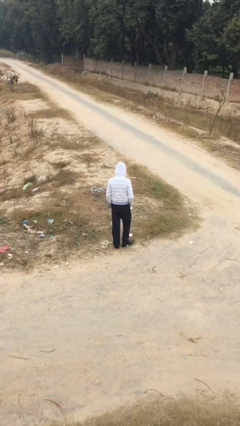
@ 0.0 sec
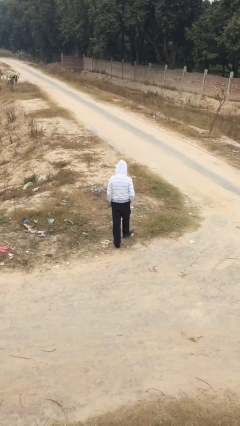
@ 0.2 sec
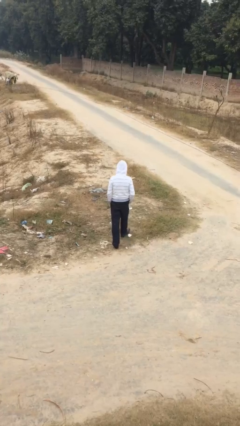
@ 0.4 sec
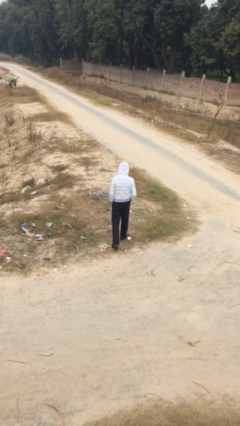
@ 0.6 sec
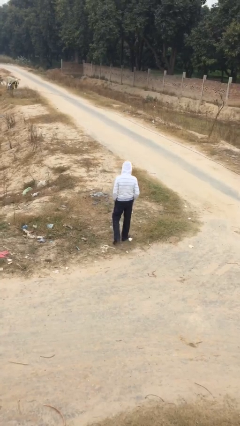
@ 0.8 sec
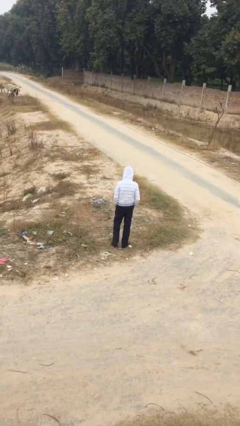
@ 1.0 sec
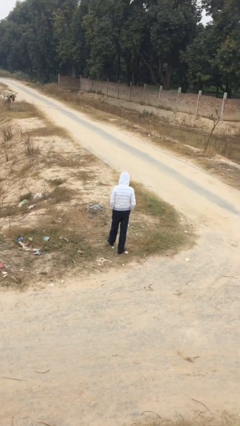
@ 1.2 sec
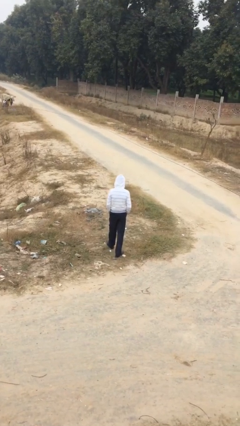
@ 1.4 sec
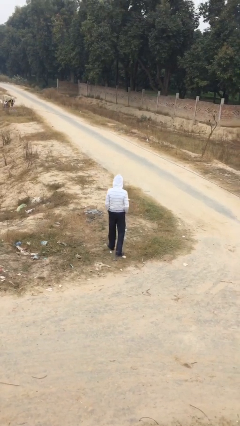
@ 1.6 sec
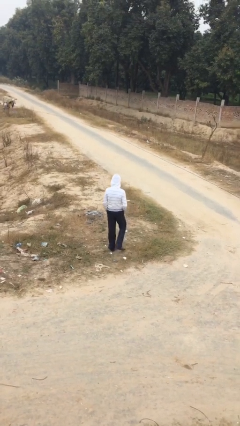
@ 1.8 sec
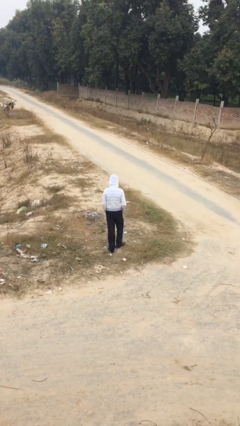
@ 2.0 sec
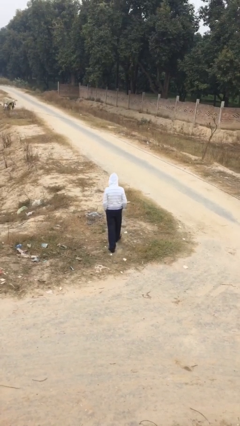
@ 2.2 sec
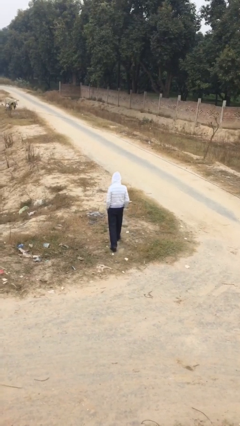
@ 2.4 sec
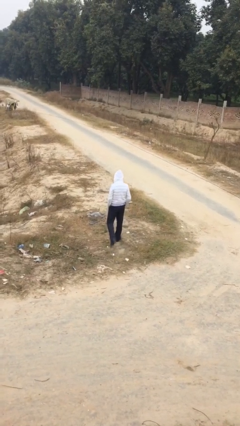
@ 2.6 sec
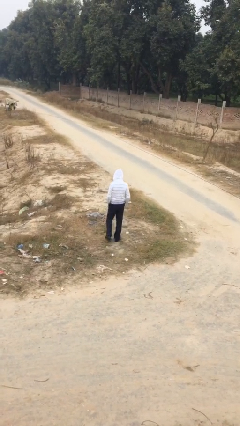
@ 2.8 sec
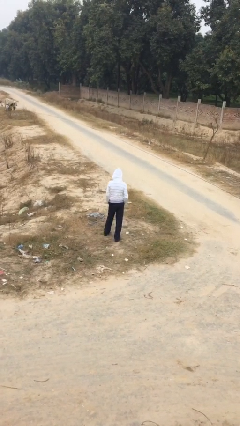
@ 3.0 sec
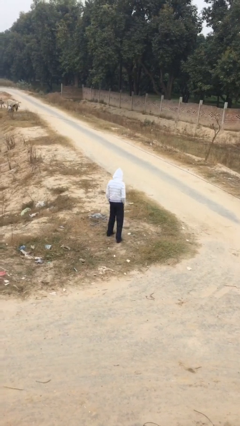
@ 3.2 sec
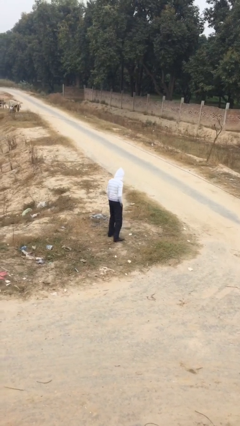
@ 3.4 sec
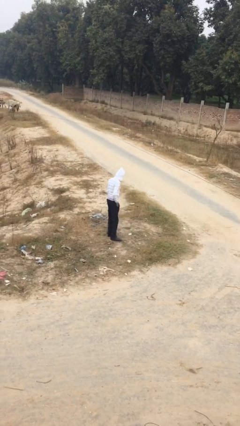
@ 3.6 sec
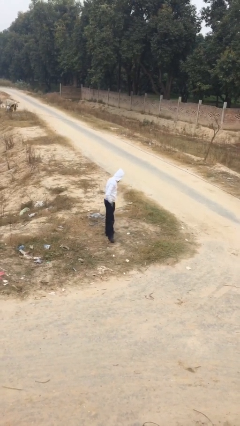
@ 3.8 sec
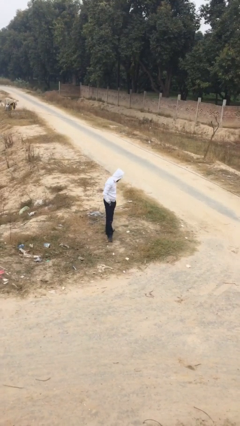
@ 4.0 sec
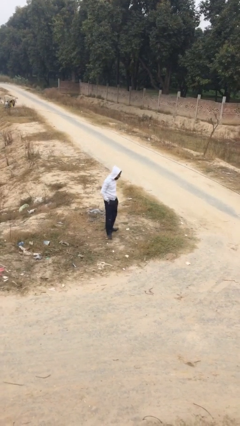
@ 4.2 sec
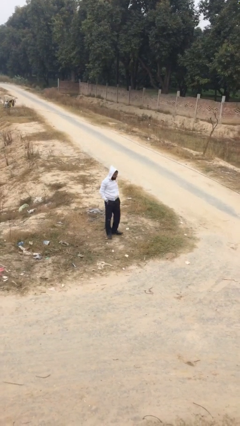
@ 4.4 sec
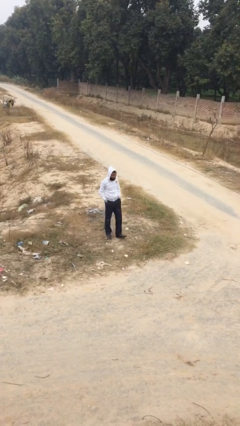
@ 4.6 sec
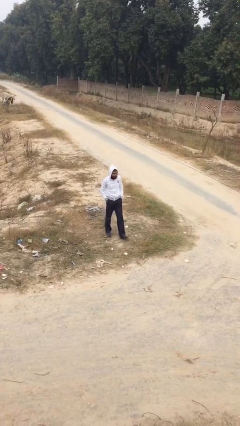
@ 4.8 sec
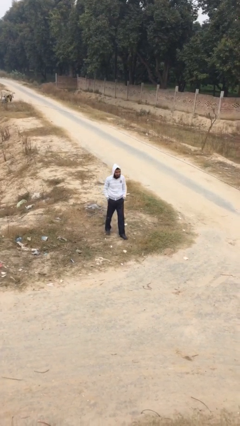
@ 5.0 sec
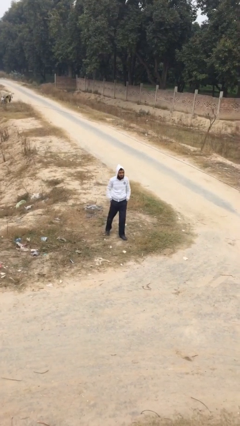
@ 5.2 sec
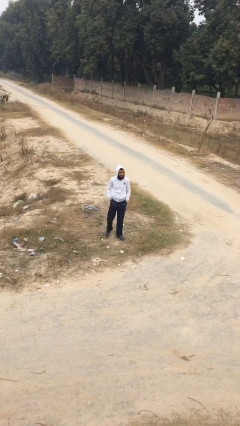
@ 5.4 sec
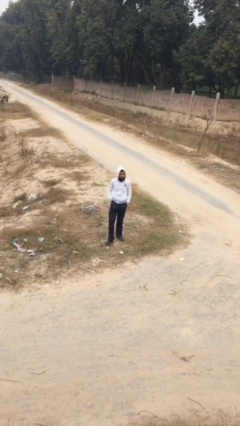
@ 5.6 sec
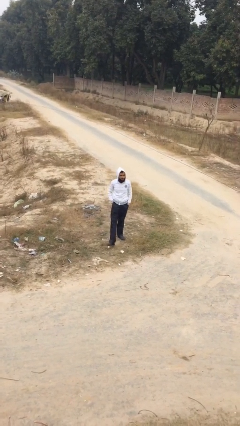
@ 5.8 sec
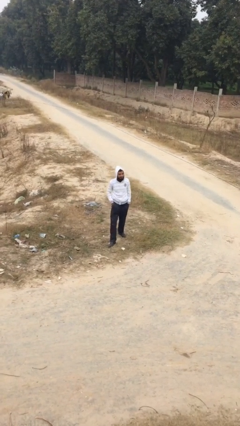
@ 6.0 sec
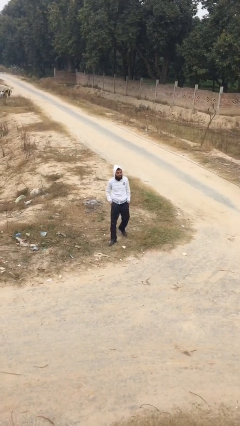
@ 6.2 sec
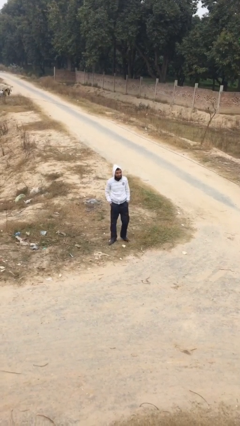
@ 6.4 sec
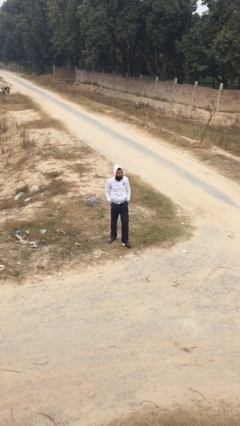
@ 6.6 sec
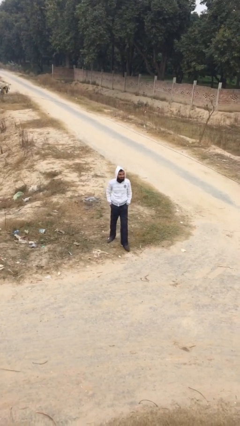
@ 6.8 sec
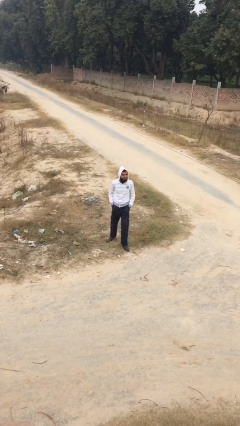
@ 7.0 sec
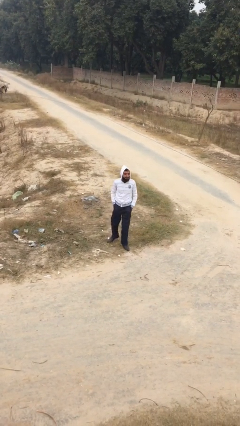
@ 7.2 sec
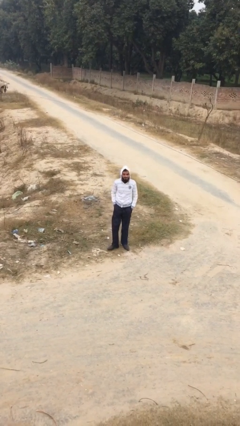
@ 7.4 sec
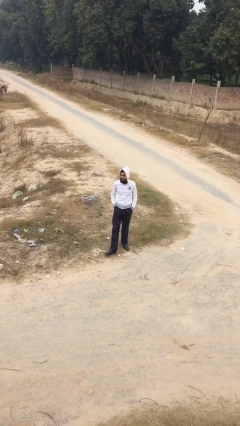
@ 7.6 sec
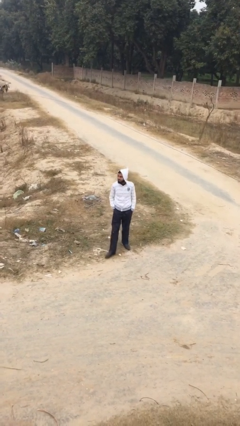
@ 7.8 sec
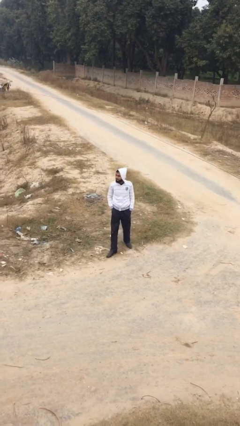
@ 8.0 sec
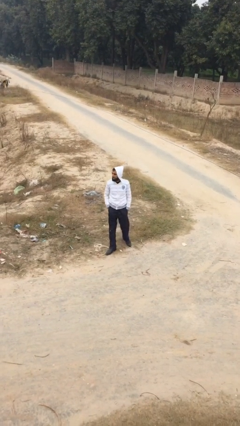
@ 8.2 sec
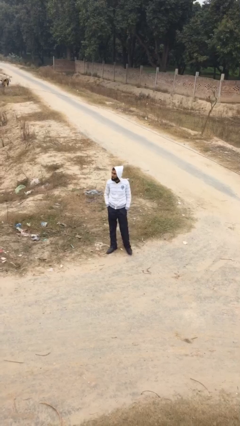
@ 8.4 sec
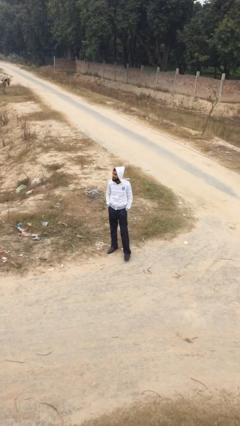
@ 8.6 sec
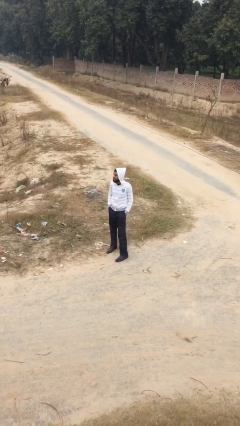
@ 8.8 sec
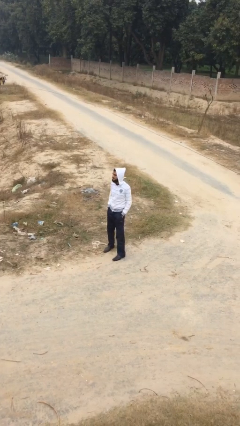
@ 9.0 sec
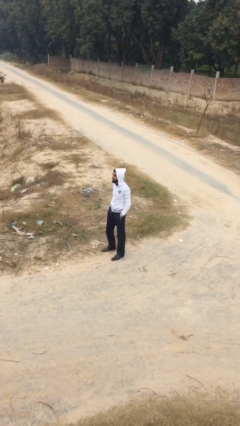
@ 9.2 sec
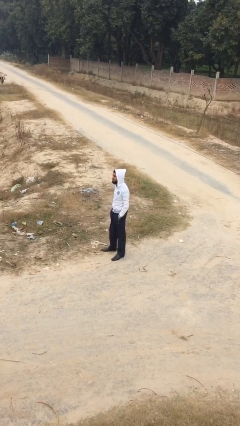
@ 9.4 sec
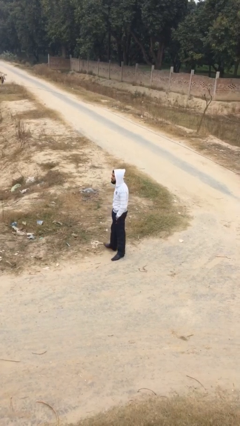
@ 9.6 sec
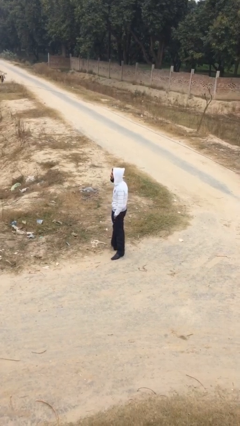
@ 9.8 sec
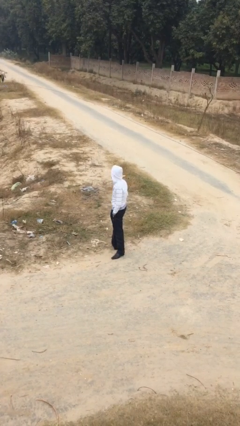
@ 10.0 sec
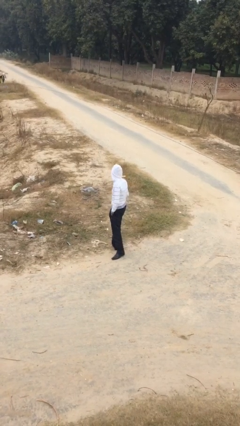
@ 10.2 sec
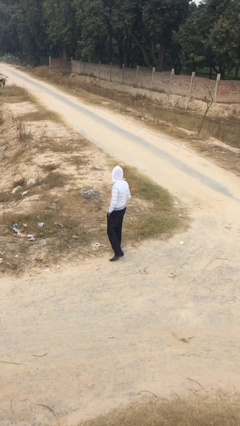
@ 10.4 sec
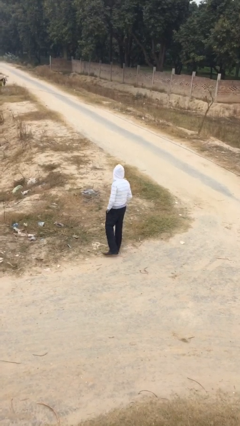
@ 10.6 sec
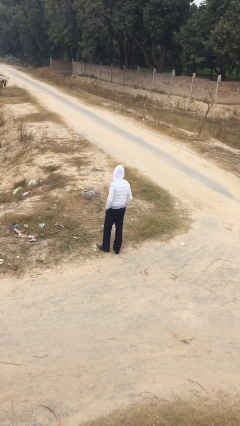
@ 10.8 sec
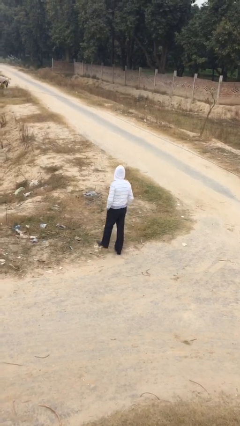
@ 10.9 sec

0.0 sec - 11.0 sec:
person walks

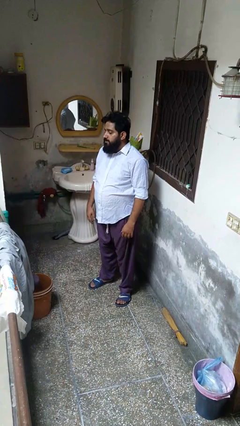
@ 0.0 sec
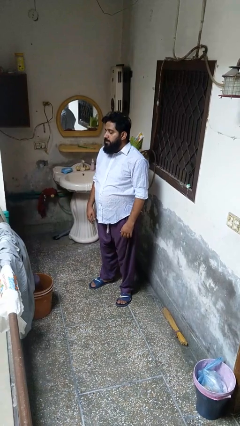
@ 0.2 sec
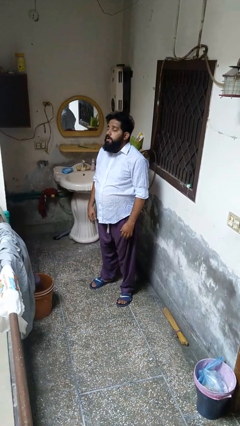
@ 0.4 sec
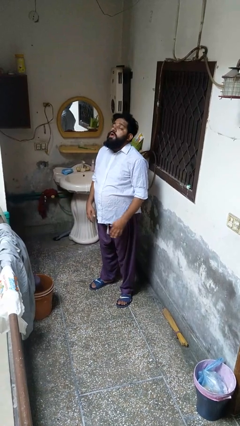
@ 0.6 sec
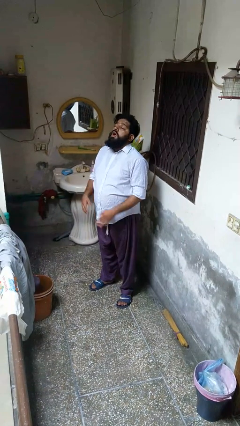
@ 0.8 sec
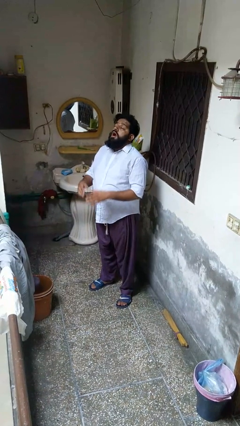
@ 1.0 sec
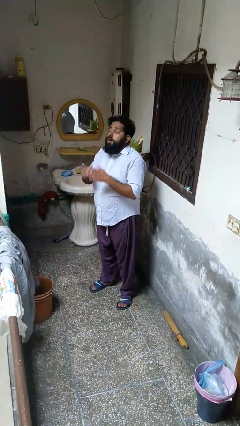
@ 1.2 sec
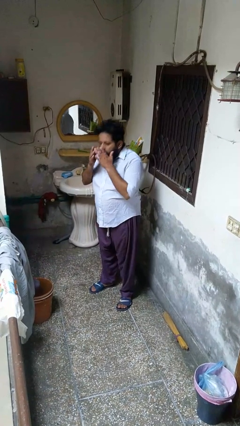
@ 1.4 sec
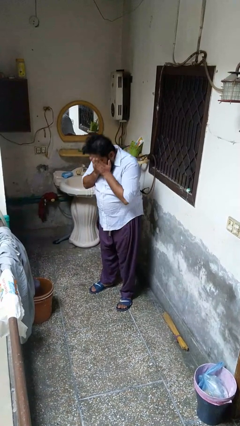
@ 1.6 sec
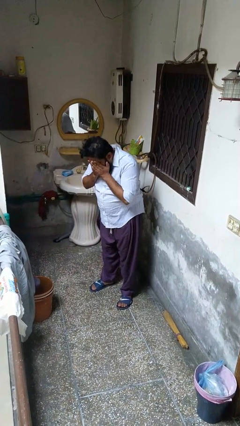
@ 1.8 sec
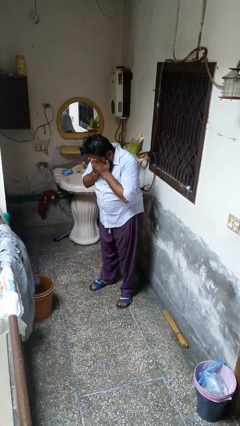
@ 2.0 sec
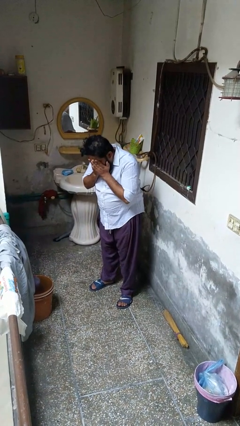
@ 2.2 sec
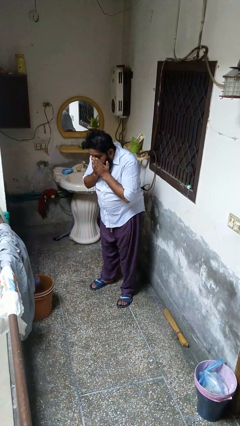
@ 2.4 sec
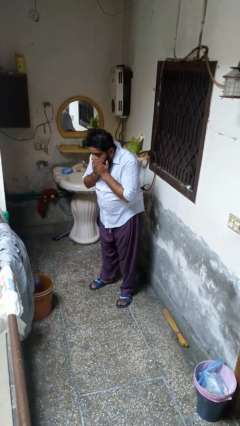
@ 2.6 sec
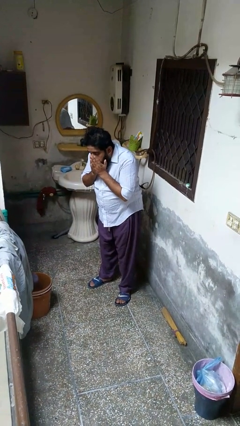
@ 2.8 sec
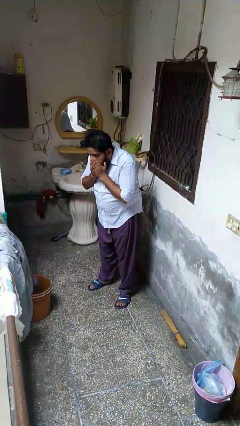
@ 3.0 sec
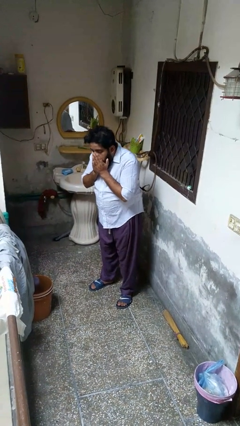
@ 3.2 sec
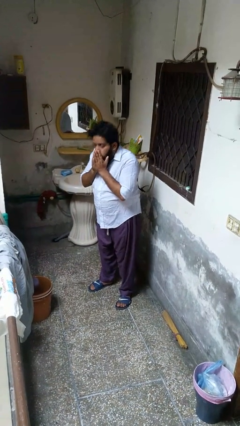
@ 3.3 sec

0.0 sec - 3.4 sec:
person sneezes into hand

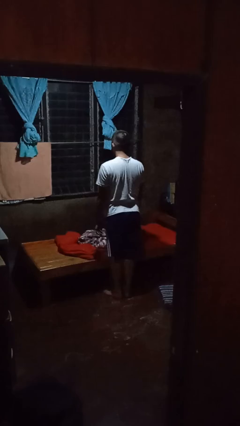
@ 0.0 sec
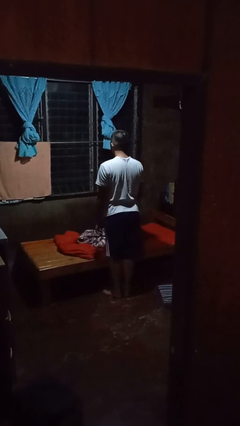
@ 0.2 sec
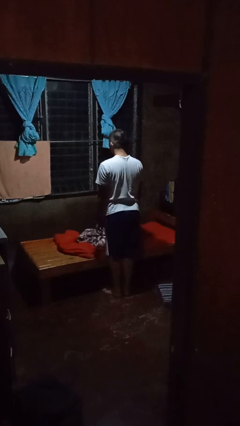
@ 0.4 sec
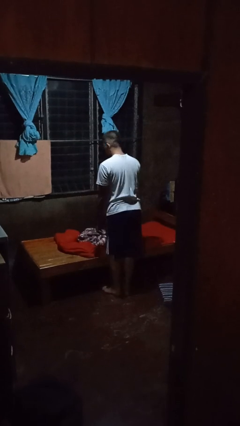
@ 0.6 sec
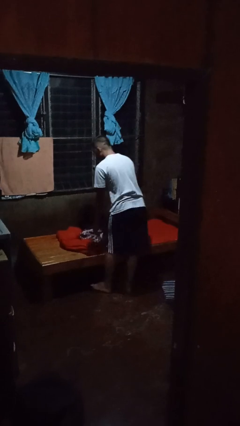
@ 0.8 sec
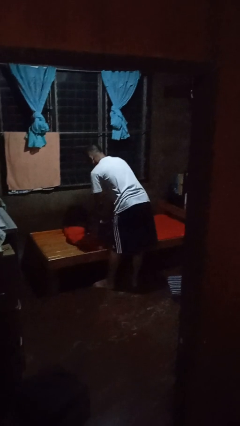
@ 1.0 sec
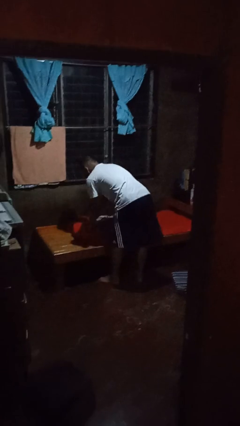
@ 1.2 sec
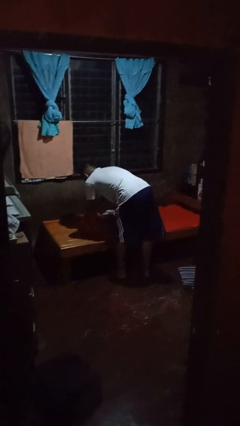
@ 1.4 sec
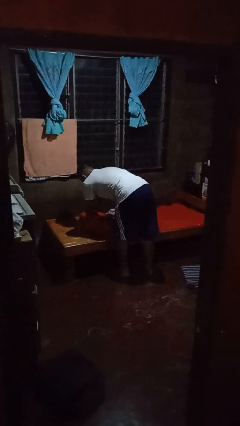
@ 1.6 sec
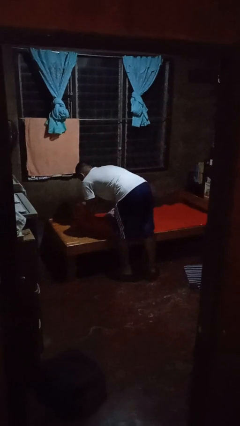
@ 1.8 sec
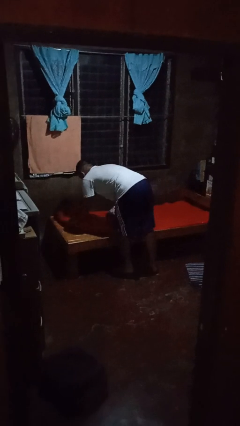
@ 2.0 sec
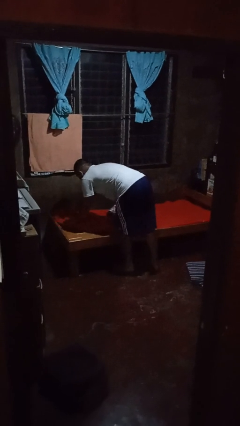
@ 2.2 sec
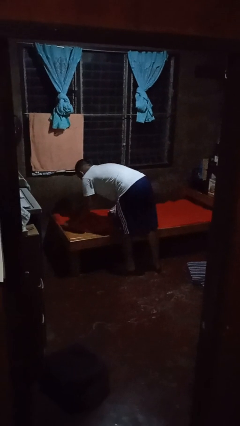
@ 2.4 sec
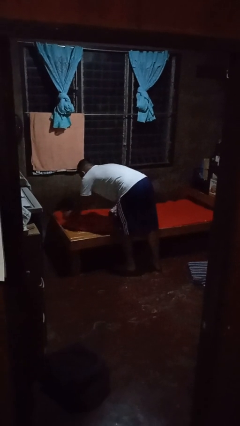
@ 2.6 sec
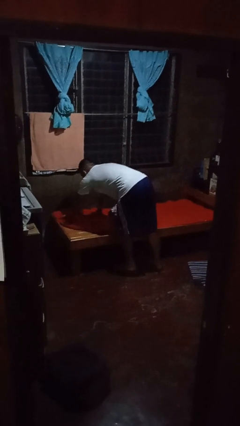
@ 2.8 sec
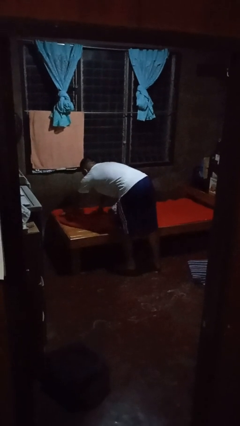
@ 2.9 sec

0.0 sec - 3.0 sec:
person makes bed
